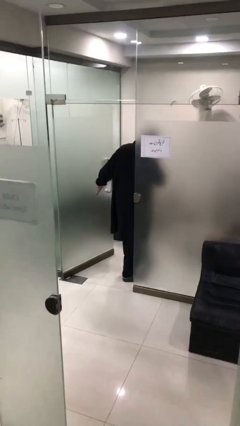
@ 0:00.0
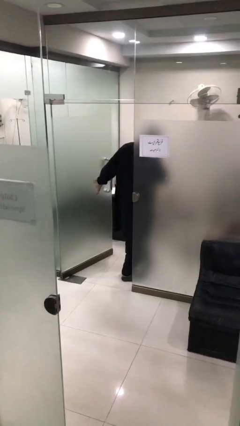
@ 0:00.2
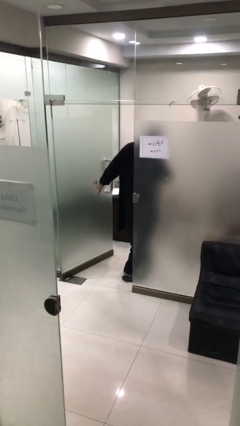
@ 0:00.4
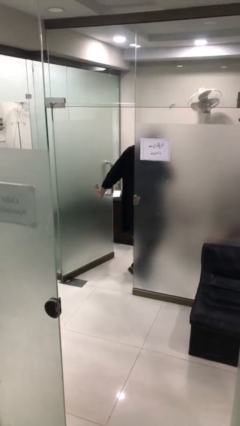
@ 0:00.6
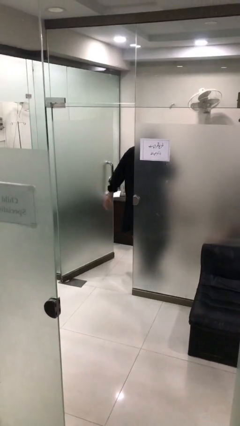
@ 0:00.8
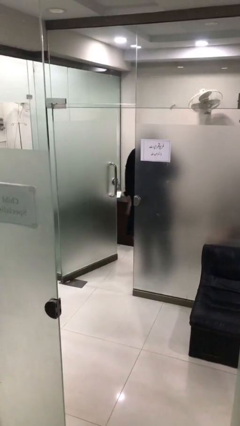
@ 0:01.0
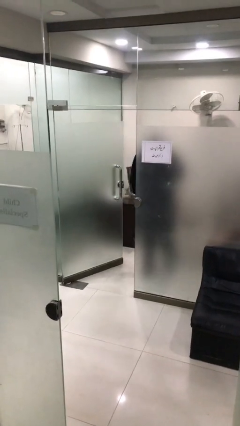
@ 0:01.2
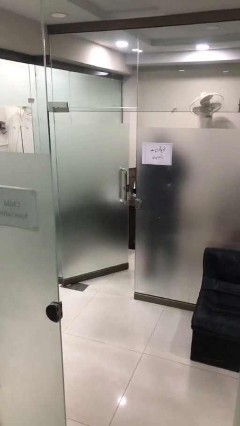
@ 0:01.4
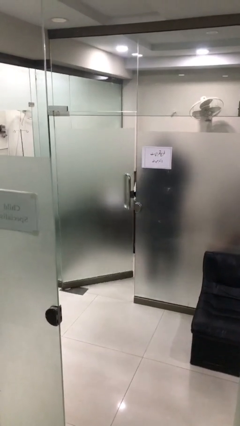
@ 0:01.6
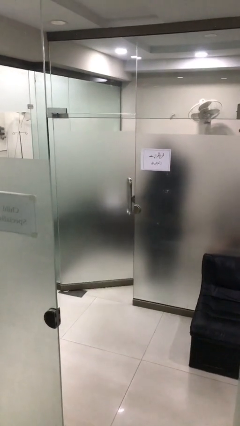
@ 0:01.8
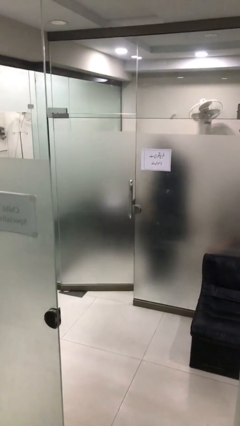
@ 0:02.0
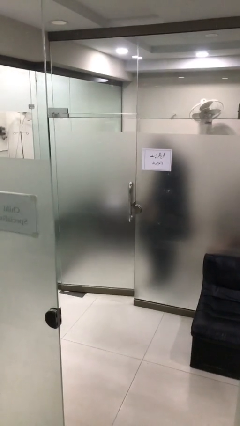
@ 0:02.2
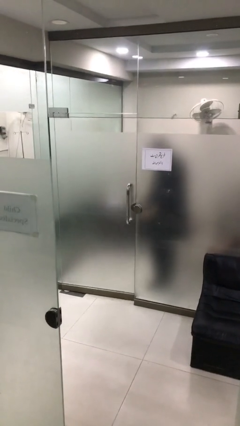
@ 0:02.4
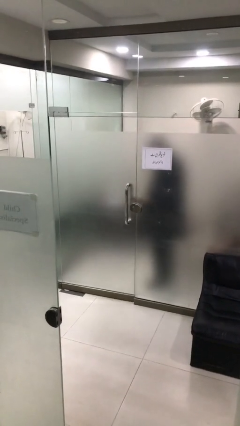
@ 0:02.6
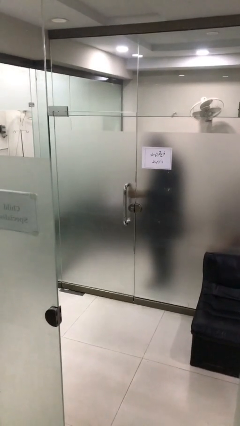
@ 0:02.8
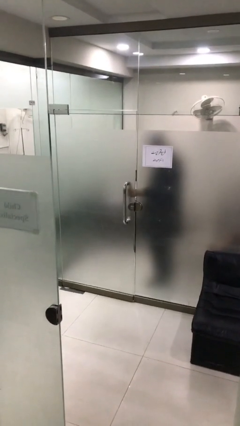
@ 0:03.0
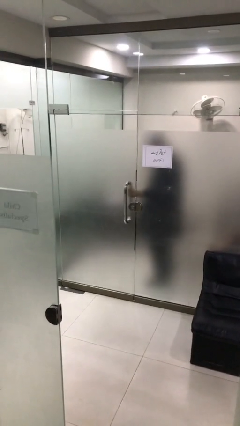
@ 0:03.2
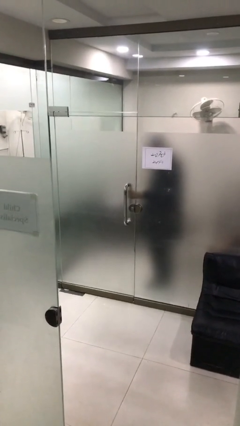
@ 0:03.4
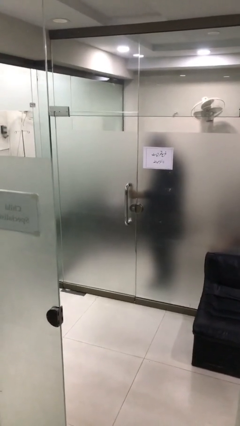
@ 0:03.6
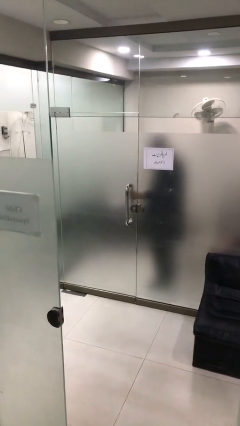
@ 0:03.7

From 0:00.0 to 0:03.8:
person closes facility door

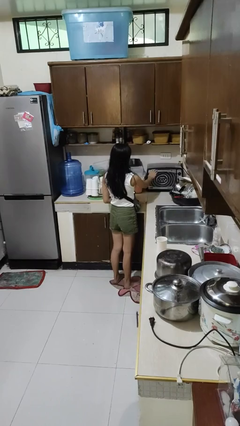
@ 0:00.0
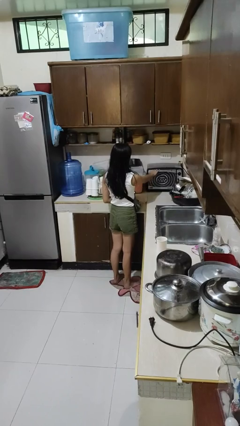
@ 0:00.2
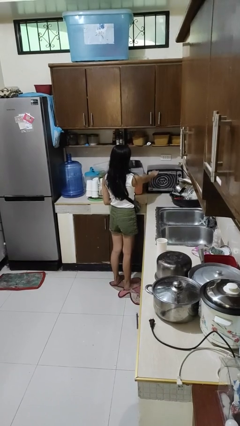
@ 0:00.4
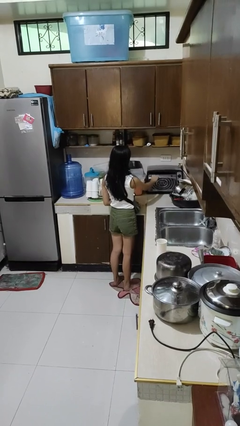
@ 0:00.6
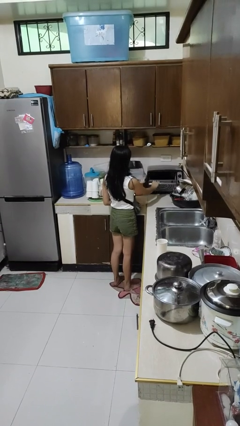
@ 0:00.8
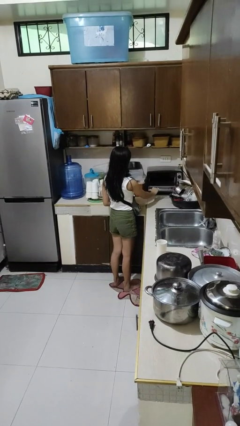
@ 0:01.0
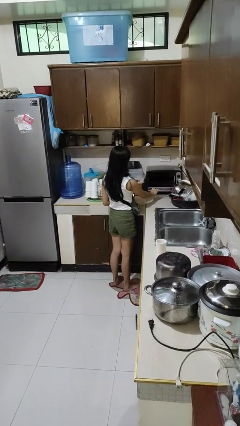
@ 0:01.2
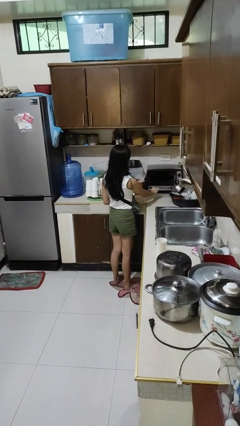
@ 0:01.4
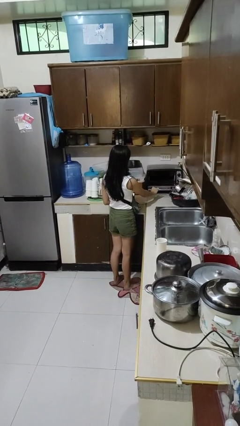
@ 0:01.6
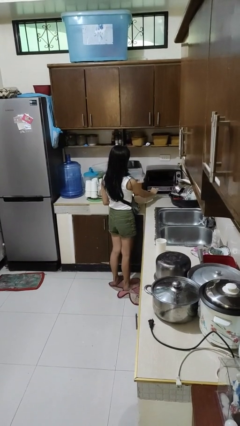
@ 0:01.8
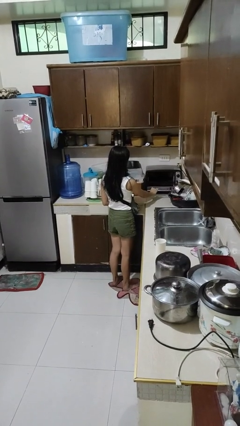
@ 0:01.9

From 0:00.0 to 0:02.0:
person opens microwave

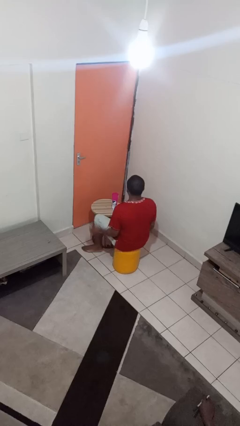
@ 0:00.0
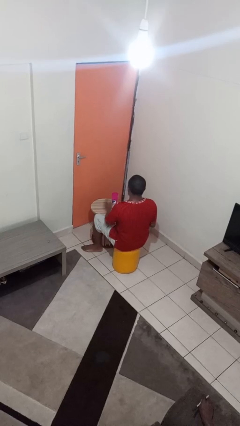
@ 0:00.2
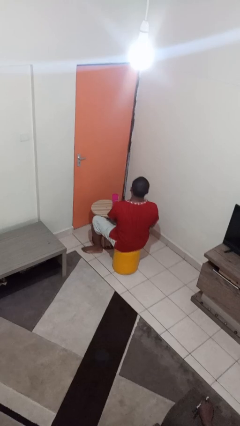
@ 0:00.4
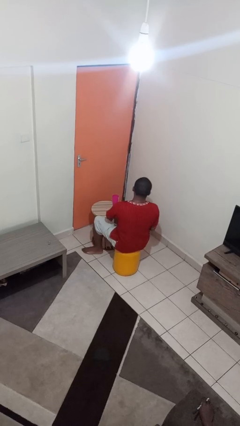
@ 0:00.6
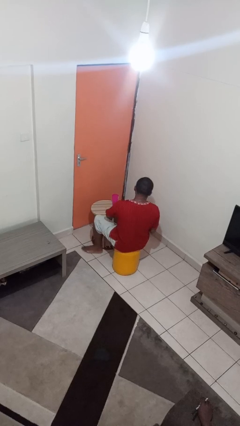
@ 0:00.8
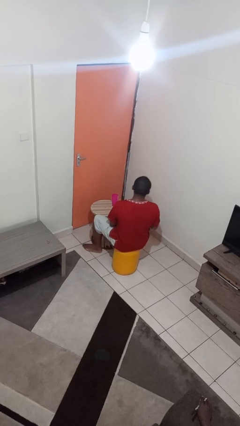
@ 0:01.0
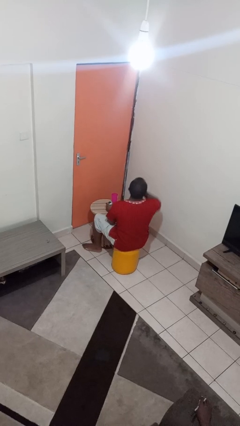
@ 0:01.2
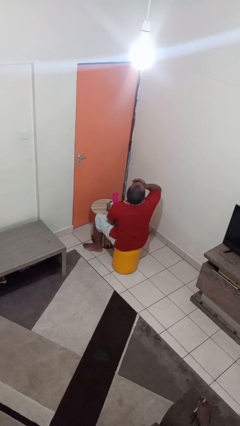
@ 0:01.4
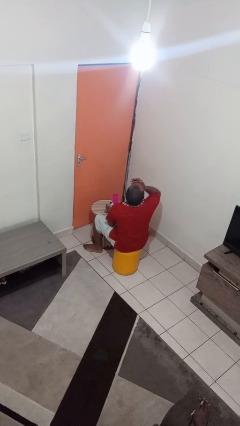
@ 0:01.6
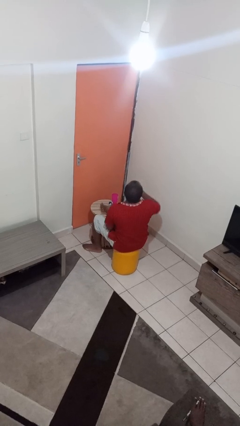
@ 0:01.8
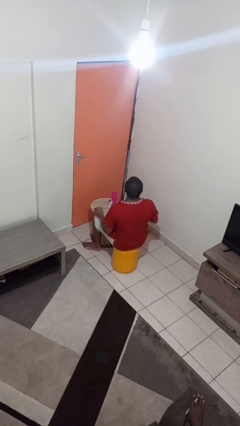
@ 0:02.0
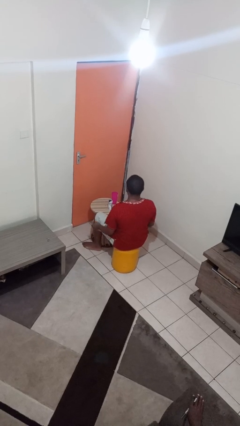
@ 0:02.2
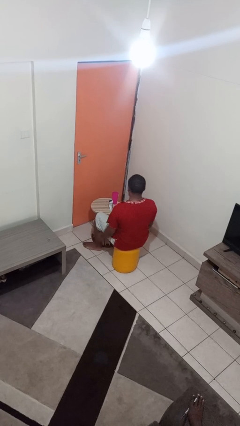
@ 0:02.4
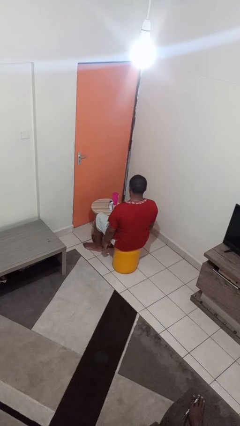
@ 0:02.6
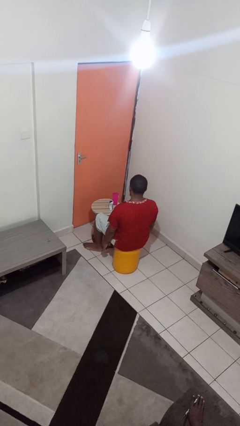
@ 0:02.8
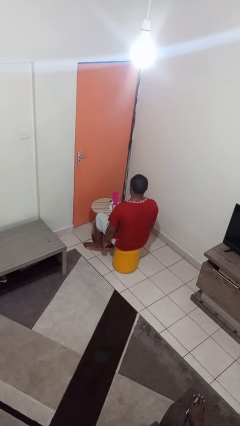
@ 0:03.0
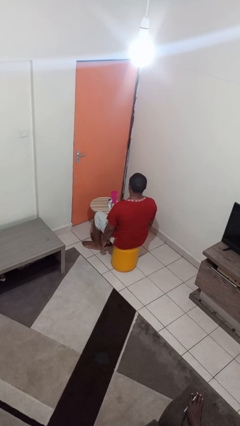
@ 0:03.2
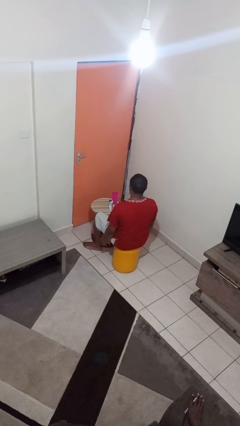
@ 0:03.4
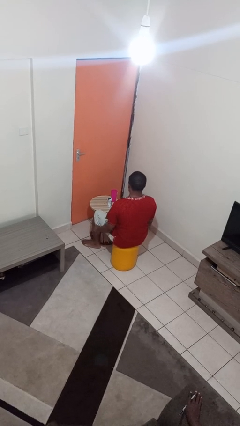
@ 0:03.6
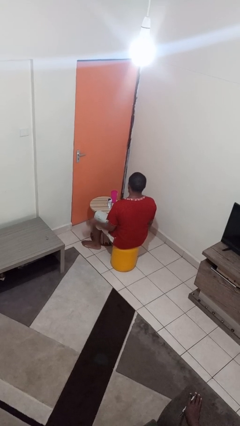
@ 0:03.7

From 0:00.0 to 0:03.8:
person takes medicine pills

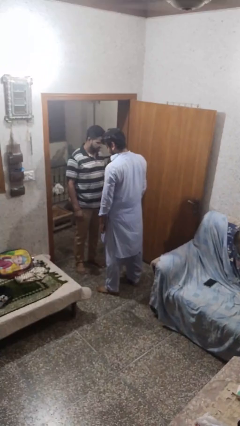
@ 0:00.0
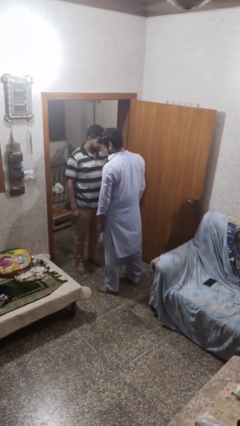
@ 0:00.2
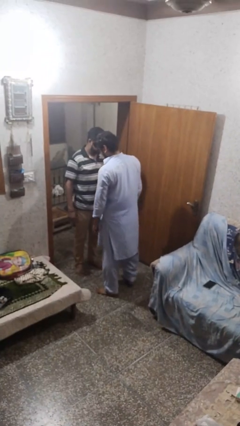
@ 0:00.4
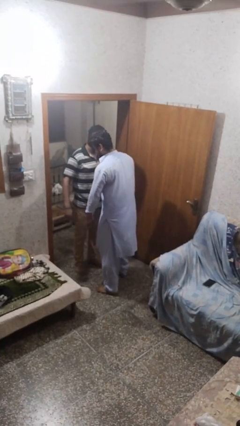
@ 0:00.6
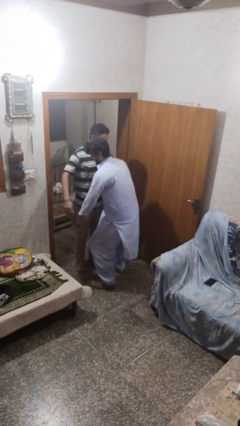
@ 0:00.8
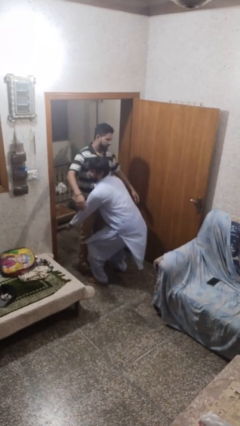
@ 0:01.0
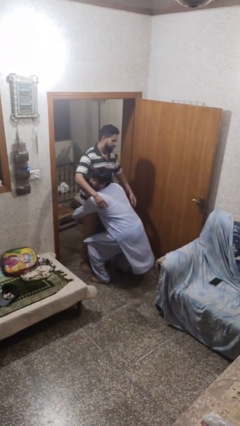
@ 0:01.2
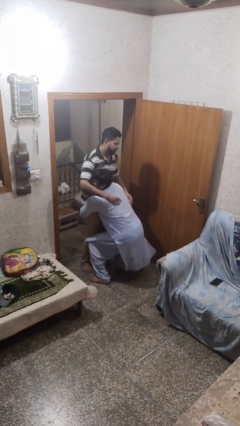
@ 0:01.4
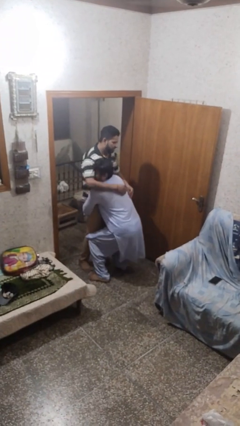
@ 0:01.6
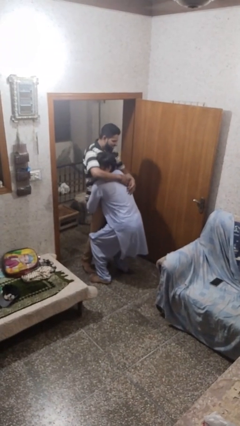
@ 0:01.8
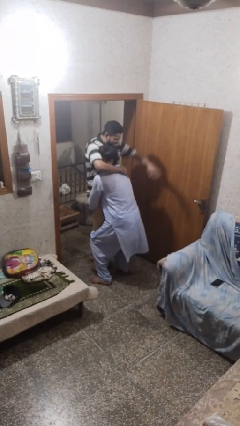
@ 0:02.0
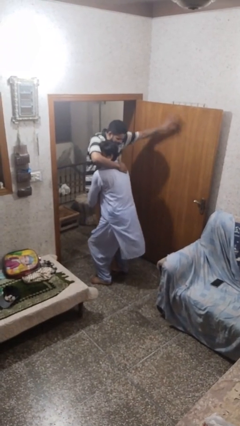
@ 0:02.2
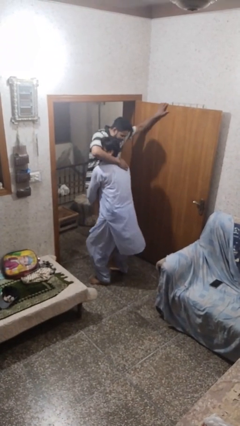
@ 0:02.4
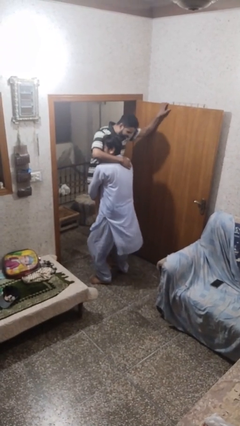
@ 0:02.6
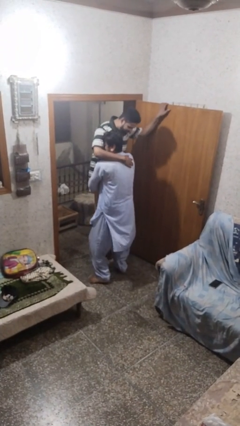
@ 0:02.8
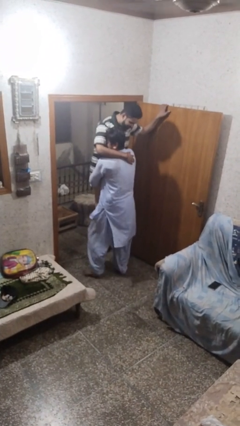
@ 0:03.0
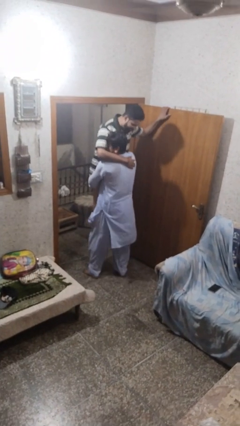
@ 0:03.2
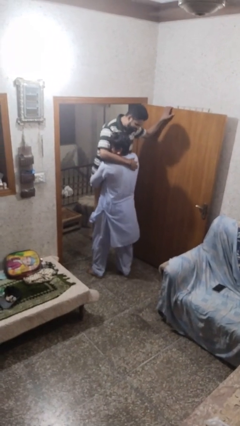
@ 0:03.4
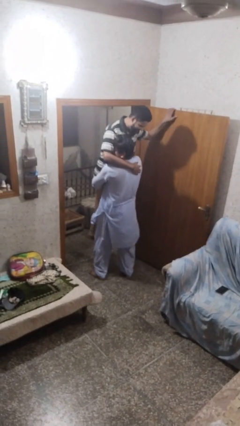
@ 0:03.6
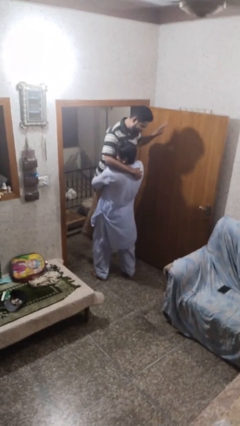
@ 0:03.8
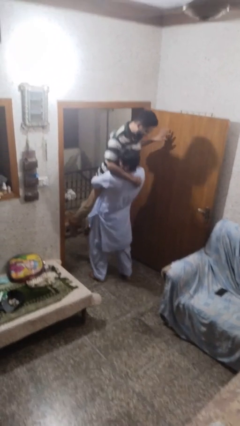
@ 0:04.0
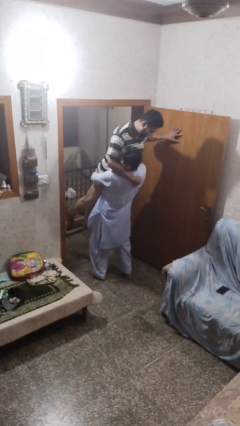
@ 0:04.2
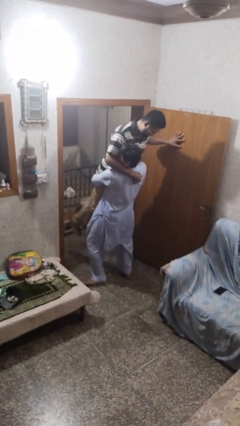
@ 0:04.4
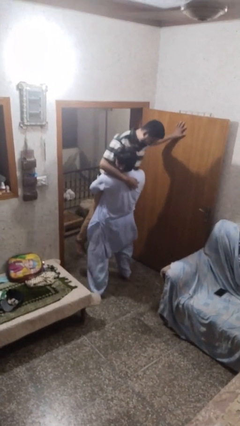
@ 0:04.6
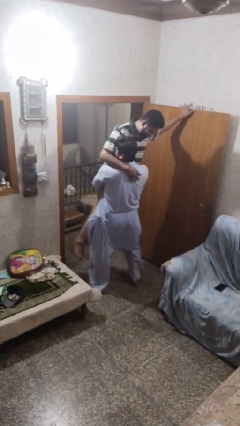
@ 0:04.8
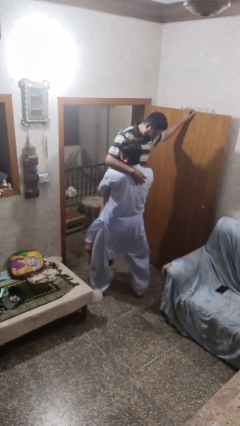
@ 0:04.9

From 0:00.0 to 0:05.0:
person picks up person

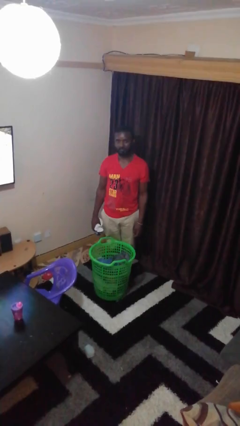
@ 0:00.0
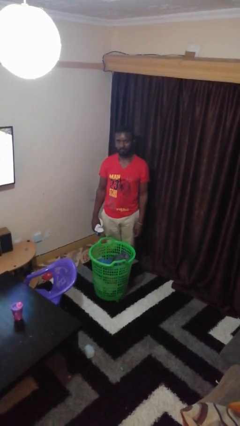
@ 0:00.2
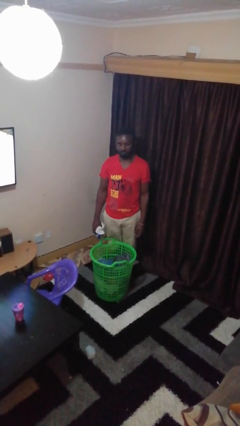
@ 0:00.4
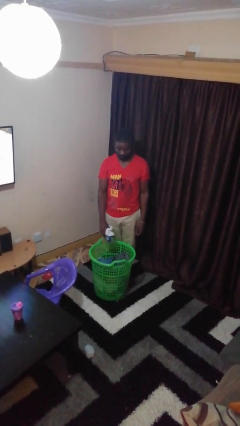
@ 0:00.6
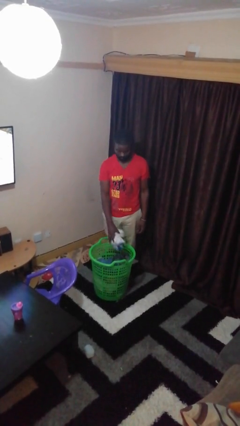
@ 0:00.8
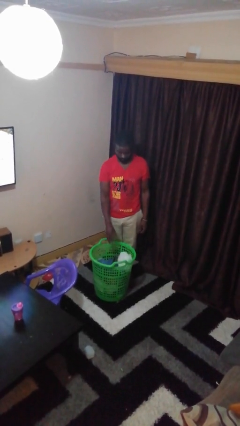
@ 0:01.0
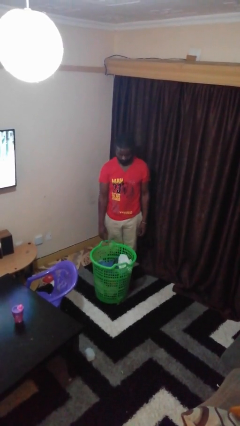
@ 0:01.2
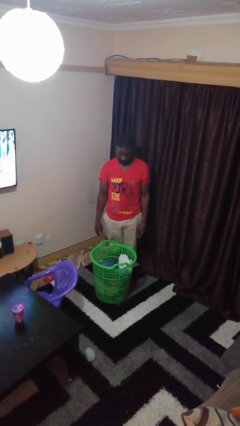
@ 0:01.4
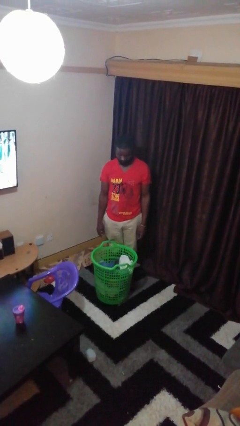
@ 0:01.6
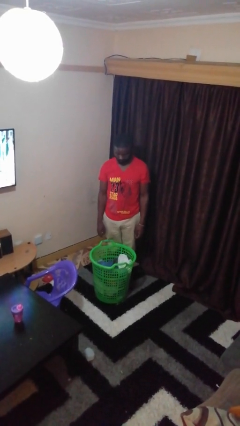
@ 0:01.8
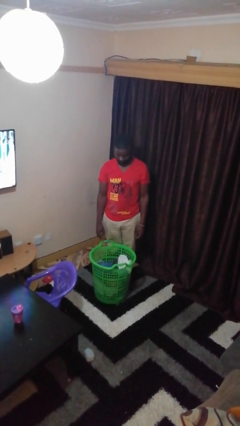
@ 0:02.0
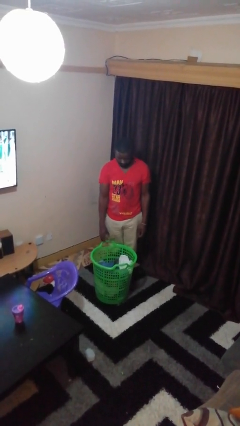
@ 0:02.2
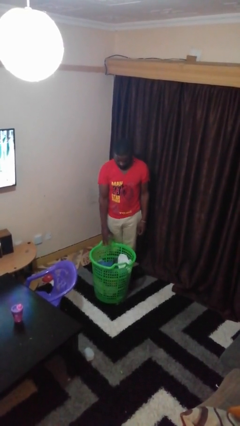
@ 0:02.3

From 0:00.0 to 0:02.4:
person puts object into basket
